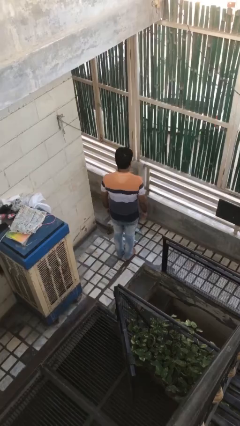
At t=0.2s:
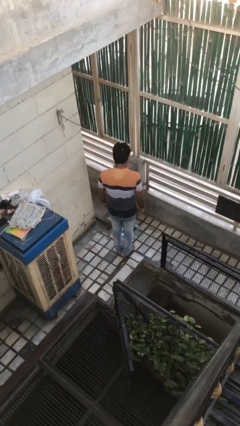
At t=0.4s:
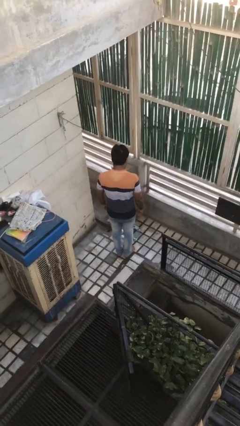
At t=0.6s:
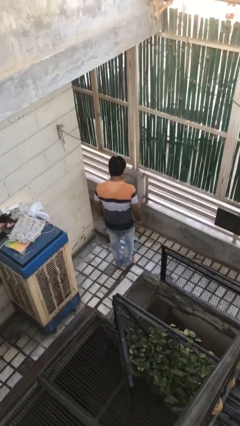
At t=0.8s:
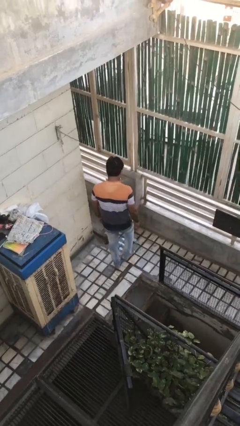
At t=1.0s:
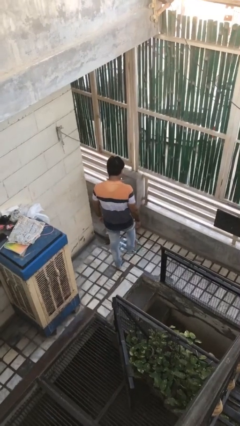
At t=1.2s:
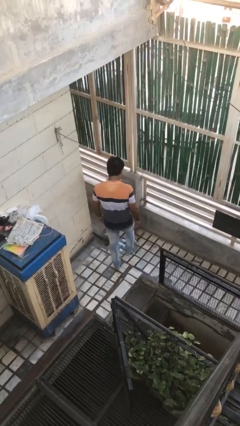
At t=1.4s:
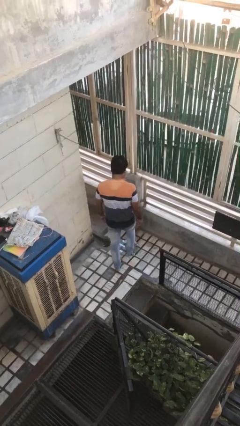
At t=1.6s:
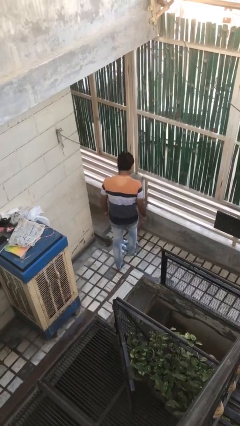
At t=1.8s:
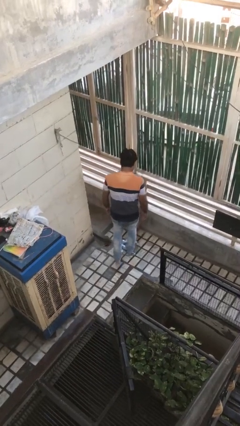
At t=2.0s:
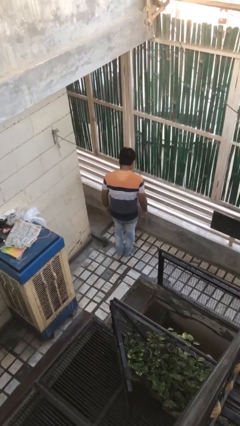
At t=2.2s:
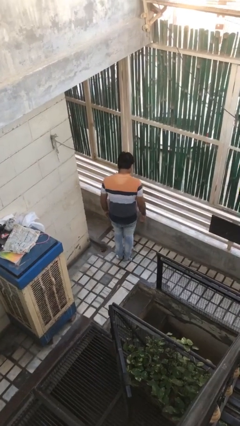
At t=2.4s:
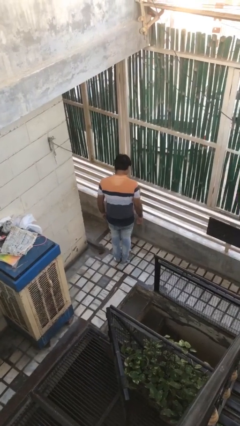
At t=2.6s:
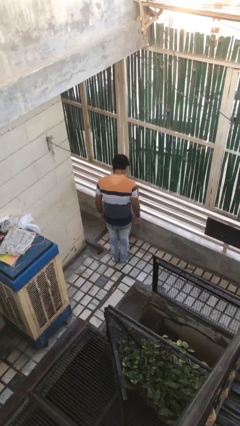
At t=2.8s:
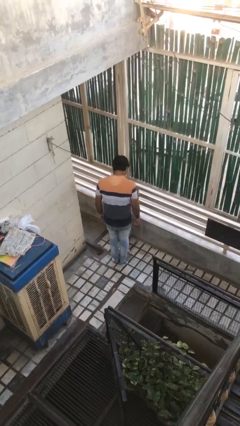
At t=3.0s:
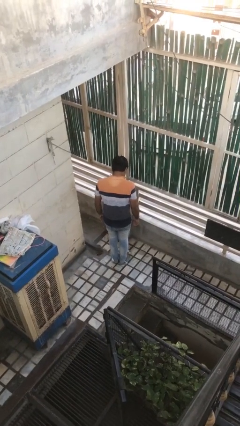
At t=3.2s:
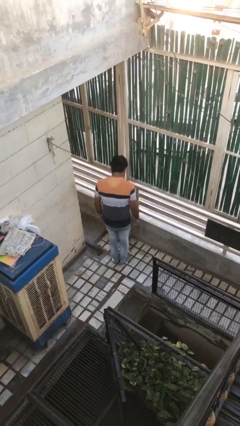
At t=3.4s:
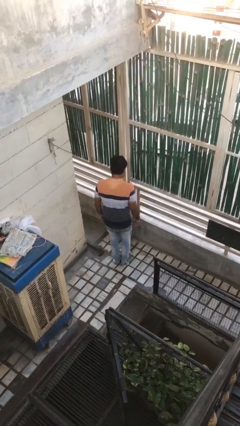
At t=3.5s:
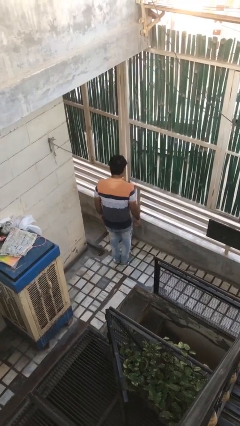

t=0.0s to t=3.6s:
person uses bodyweight scale

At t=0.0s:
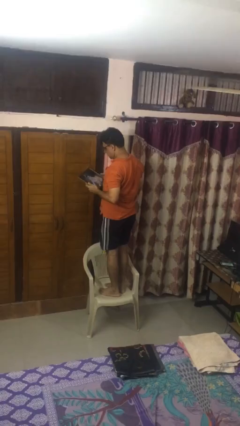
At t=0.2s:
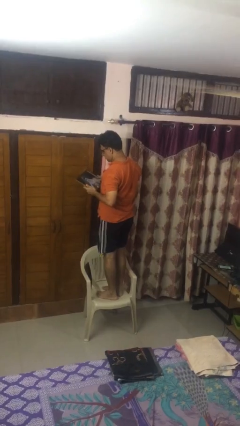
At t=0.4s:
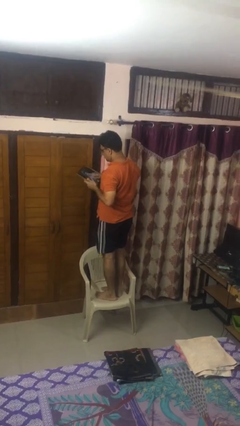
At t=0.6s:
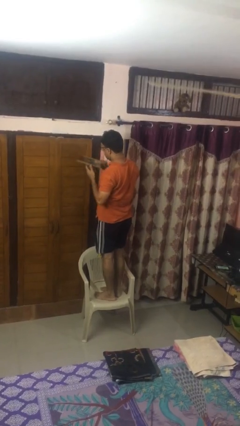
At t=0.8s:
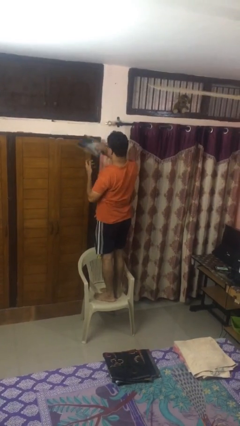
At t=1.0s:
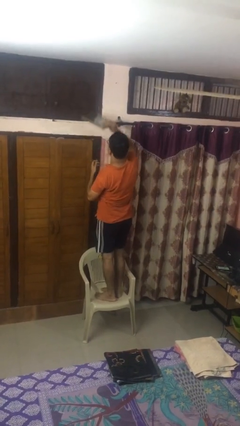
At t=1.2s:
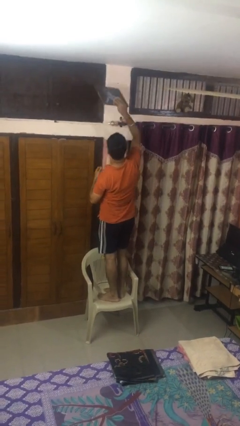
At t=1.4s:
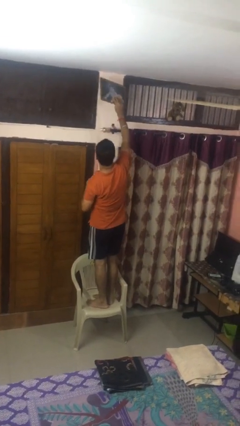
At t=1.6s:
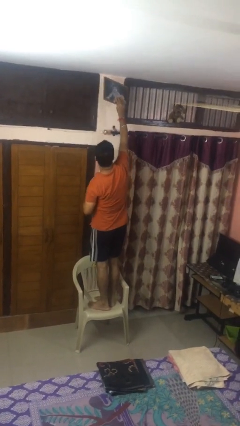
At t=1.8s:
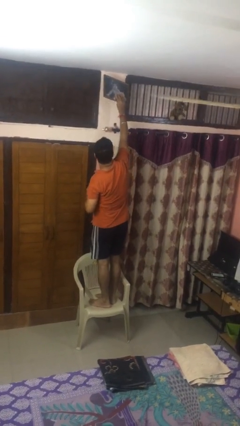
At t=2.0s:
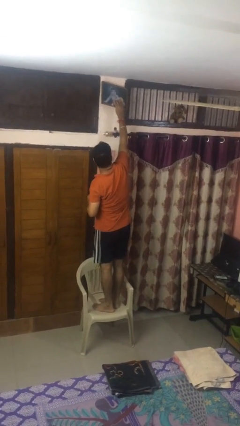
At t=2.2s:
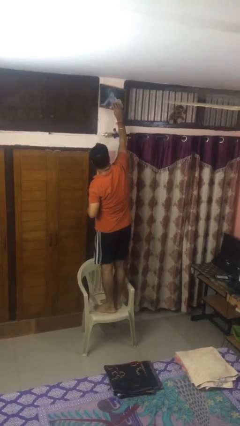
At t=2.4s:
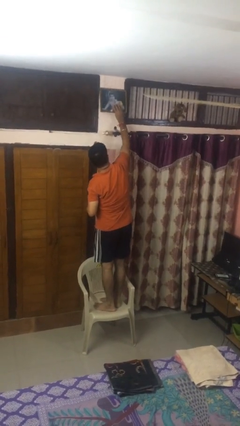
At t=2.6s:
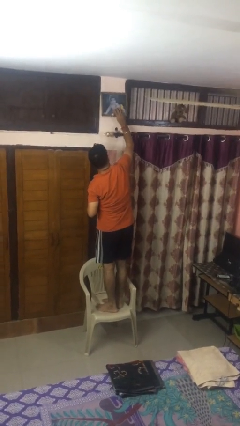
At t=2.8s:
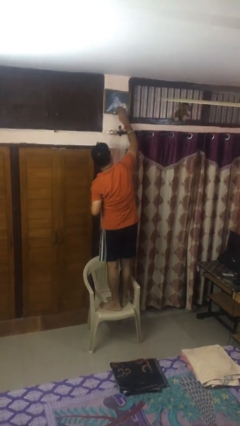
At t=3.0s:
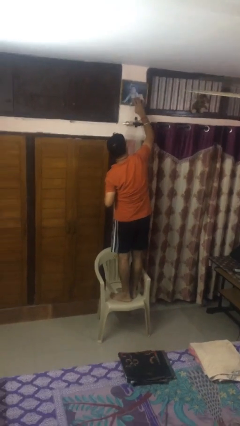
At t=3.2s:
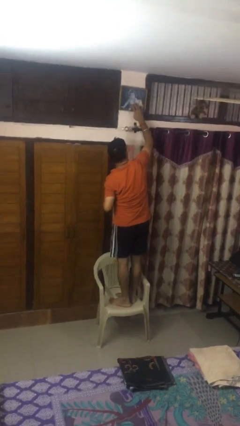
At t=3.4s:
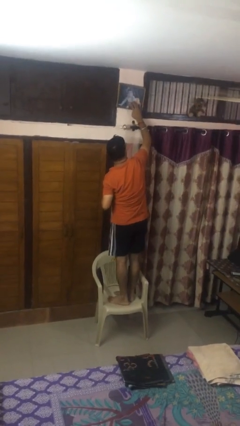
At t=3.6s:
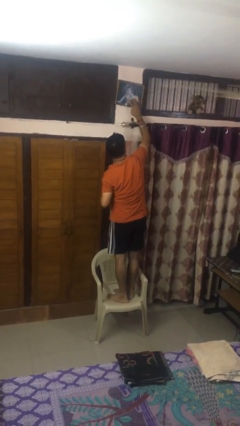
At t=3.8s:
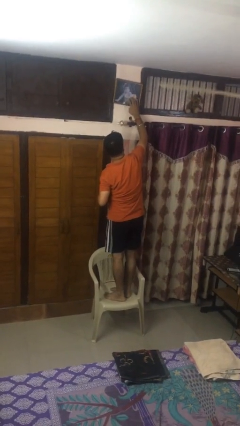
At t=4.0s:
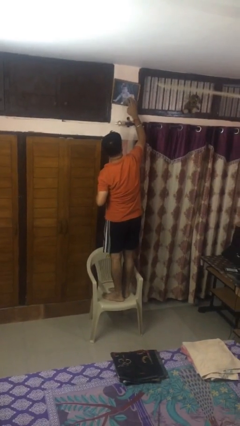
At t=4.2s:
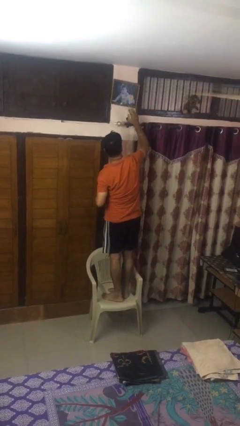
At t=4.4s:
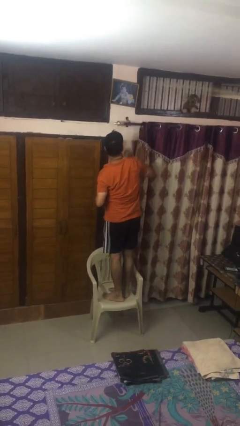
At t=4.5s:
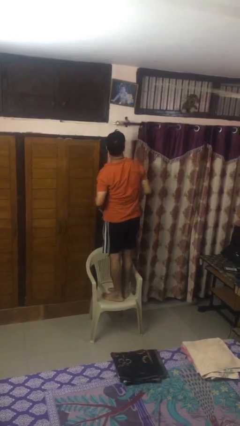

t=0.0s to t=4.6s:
person puts up picture frame

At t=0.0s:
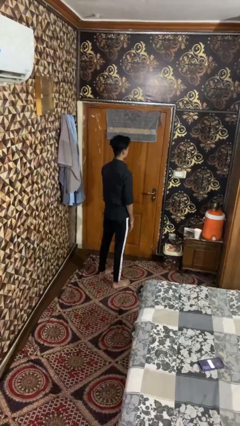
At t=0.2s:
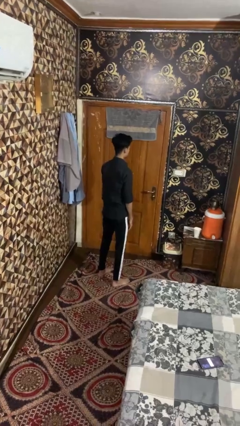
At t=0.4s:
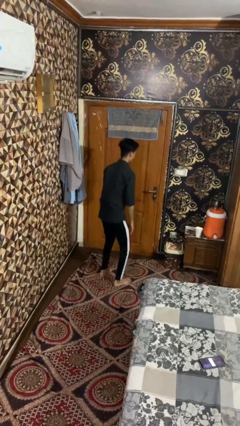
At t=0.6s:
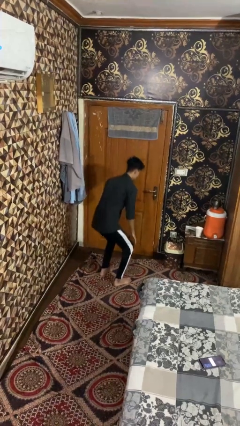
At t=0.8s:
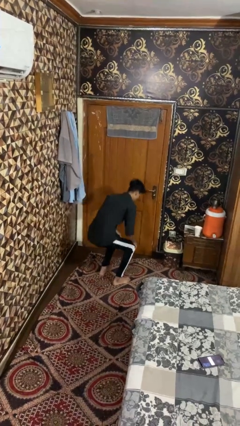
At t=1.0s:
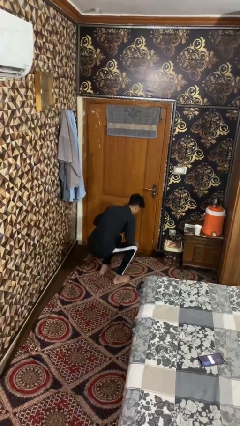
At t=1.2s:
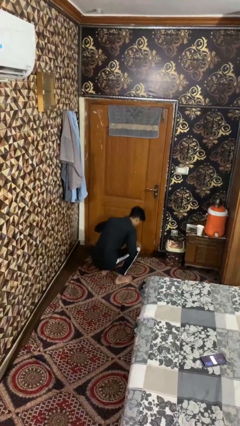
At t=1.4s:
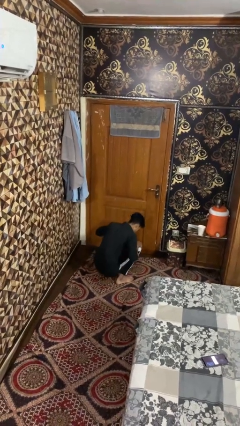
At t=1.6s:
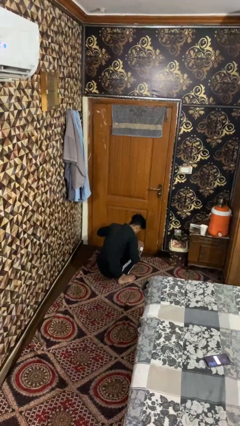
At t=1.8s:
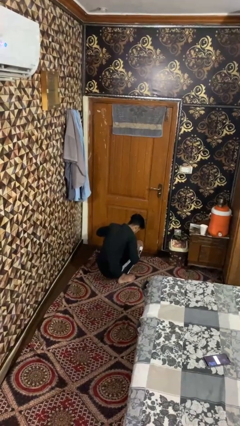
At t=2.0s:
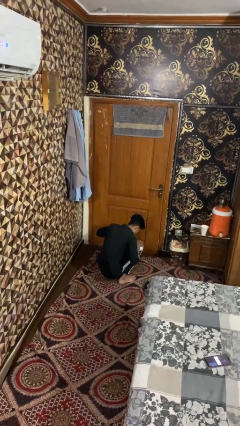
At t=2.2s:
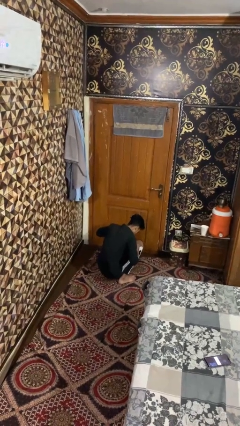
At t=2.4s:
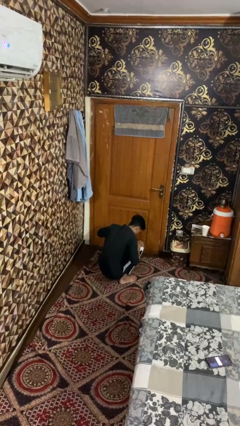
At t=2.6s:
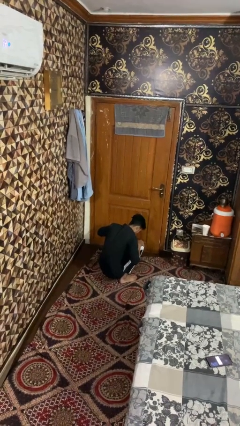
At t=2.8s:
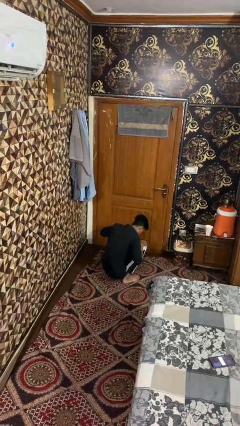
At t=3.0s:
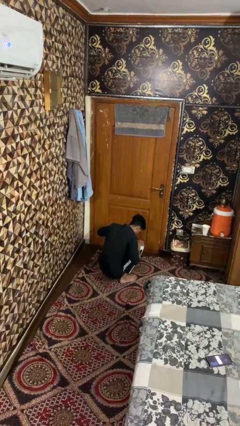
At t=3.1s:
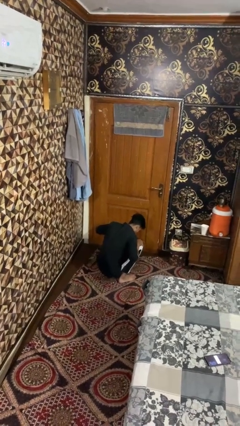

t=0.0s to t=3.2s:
person exercises with situp

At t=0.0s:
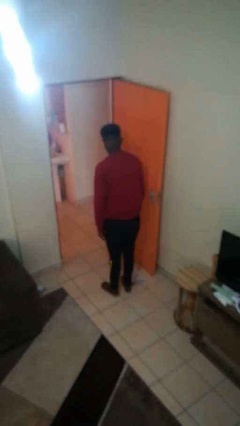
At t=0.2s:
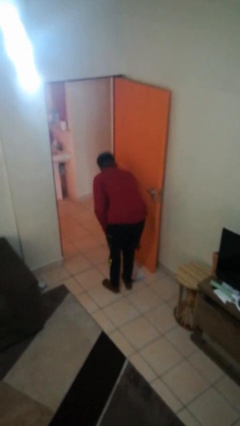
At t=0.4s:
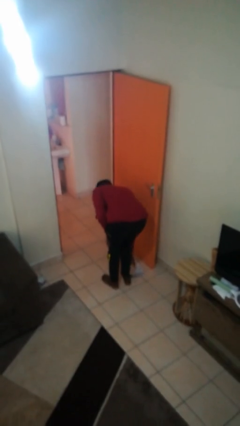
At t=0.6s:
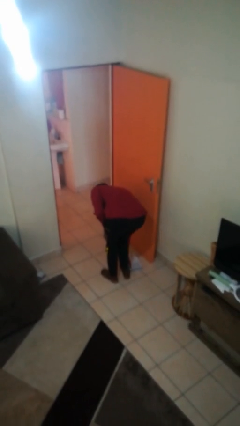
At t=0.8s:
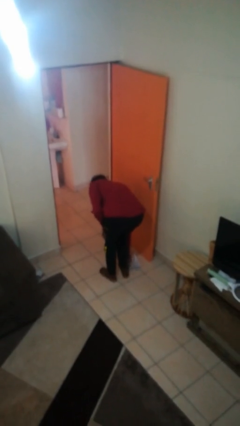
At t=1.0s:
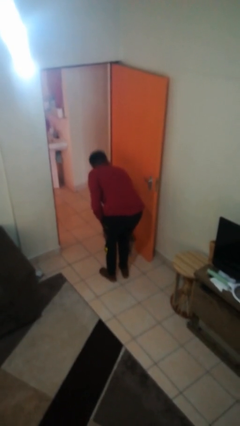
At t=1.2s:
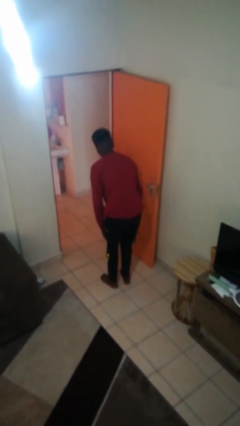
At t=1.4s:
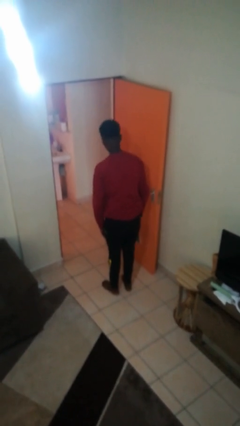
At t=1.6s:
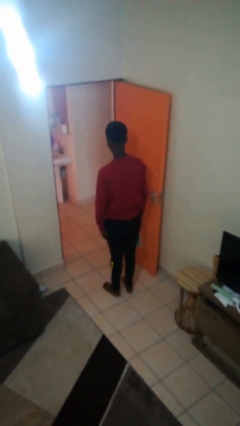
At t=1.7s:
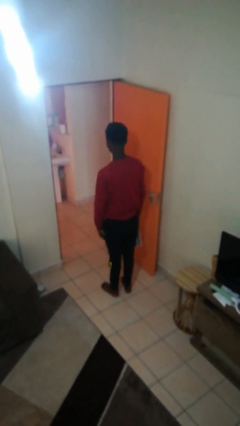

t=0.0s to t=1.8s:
person picks up object from floor

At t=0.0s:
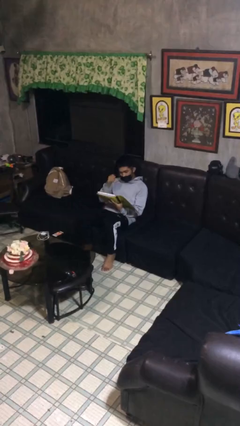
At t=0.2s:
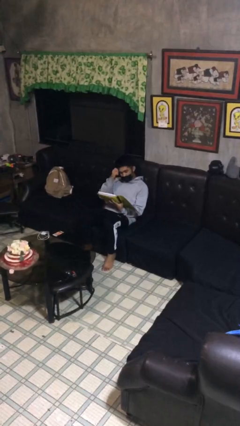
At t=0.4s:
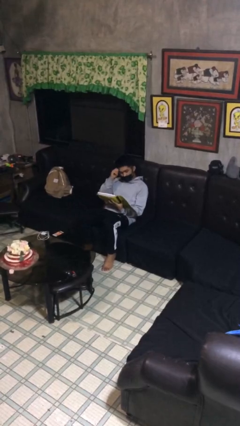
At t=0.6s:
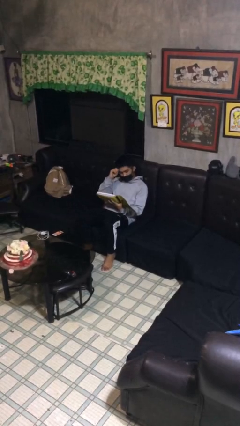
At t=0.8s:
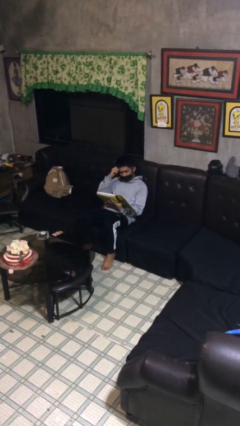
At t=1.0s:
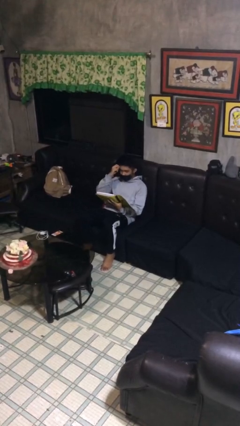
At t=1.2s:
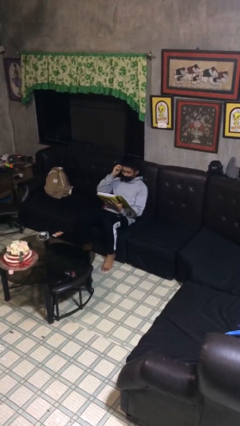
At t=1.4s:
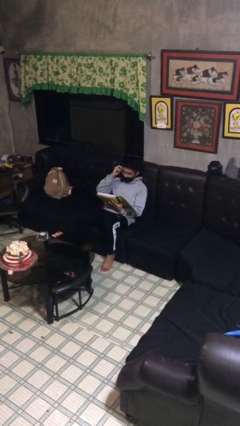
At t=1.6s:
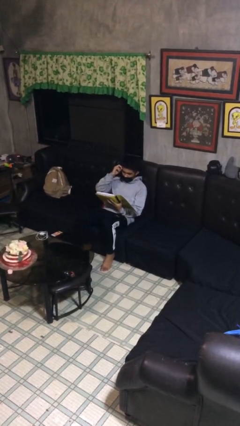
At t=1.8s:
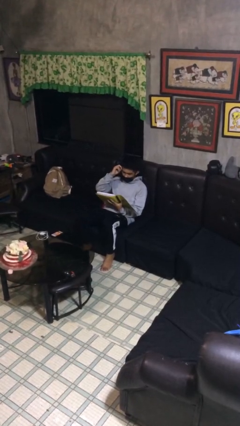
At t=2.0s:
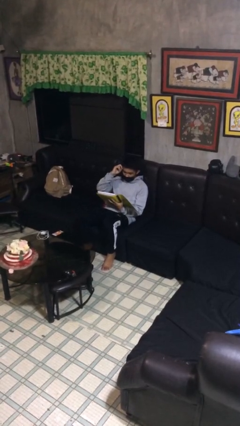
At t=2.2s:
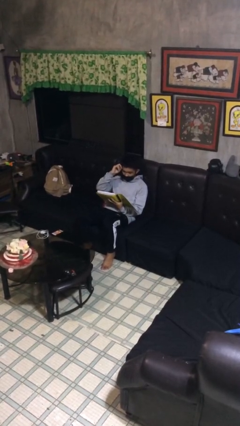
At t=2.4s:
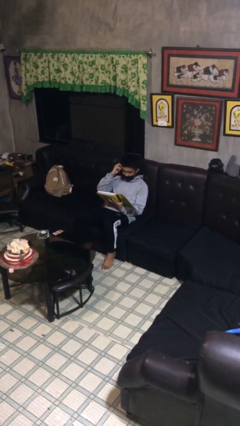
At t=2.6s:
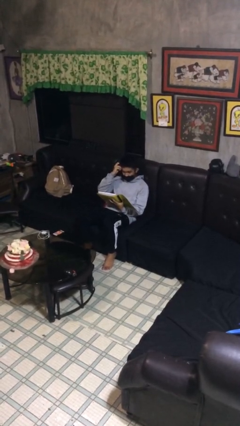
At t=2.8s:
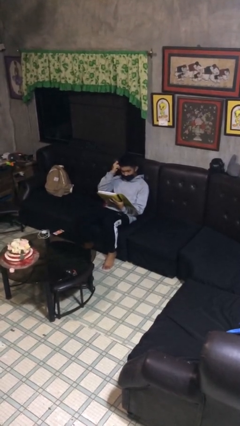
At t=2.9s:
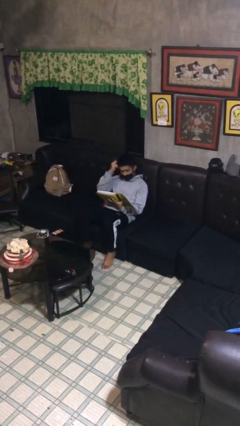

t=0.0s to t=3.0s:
person reads document

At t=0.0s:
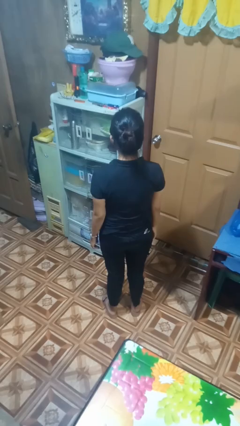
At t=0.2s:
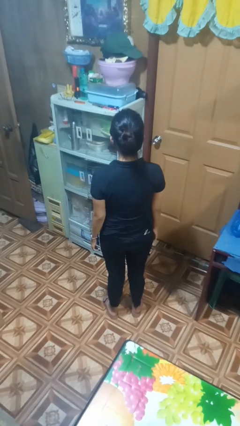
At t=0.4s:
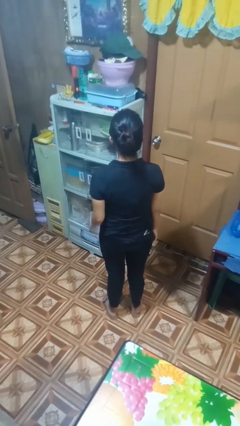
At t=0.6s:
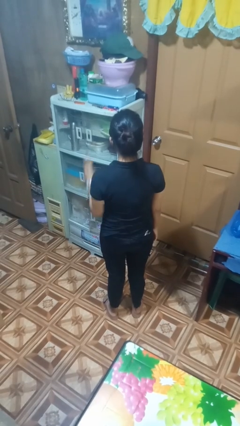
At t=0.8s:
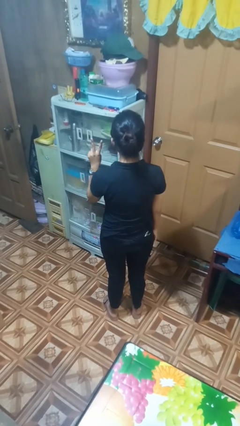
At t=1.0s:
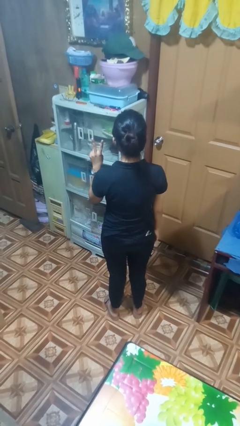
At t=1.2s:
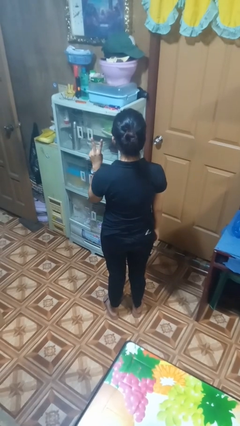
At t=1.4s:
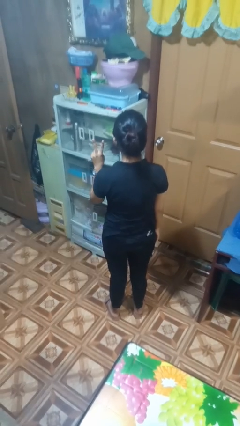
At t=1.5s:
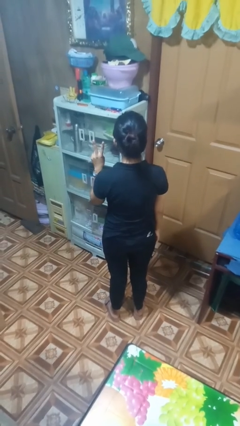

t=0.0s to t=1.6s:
person gestures peace
